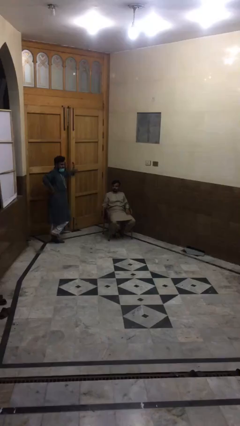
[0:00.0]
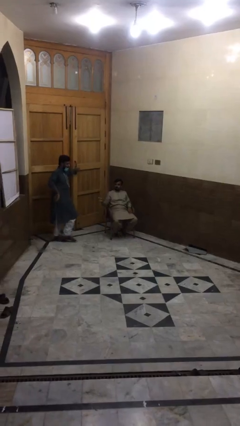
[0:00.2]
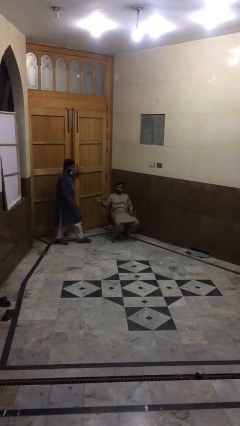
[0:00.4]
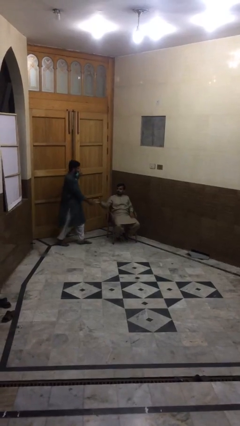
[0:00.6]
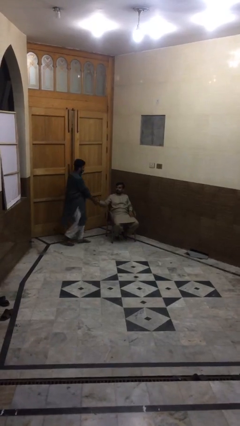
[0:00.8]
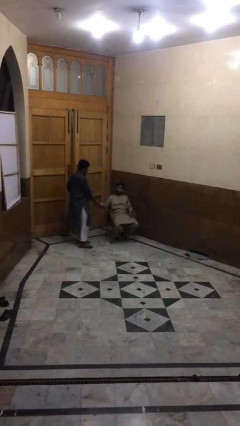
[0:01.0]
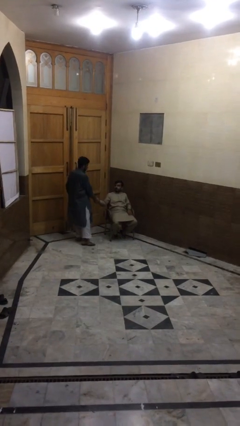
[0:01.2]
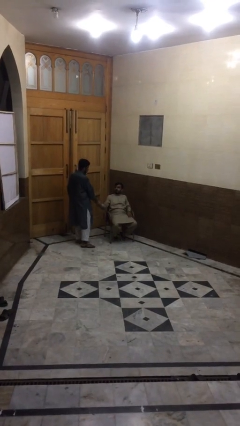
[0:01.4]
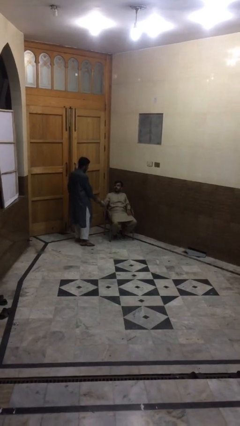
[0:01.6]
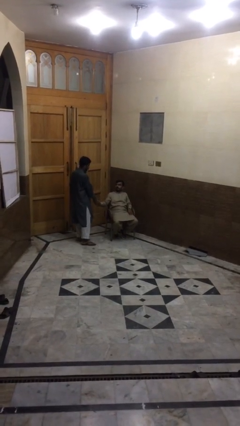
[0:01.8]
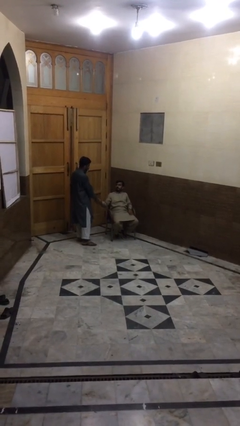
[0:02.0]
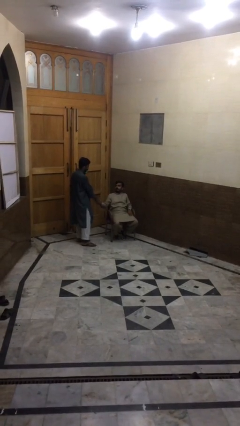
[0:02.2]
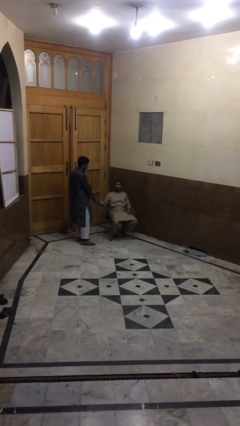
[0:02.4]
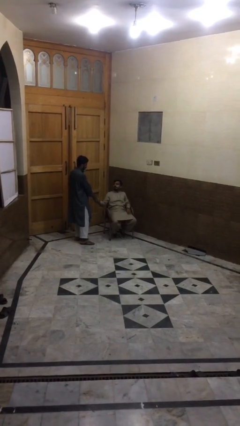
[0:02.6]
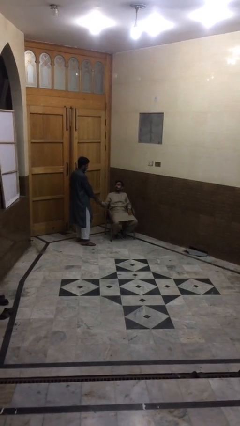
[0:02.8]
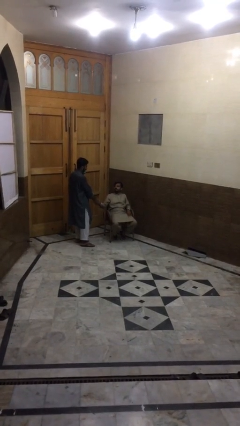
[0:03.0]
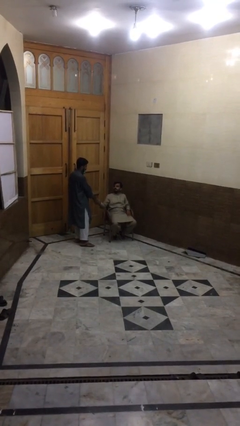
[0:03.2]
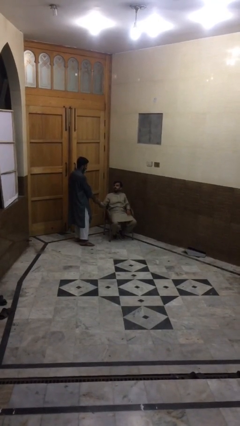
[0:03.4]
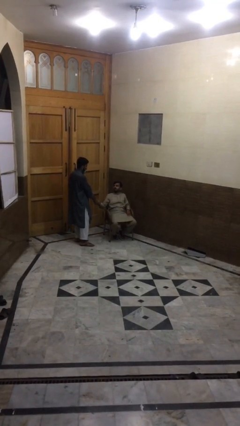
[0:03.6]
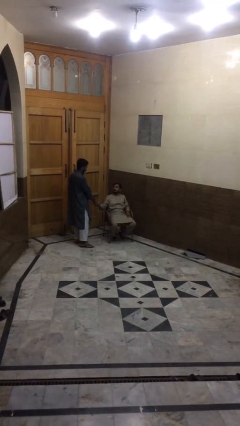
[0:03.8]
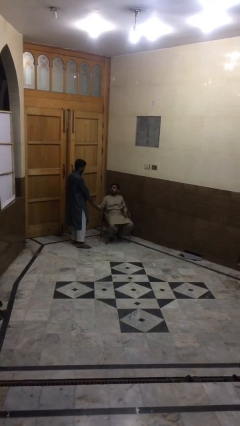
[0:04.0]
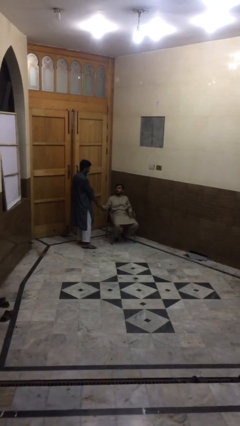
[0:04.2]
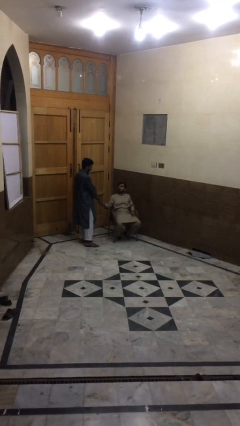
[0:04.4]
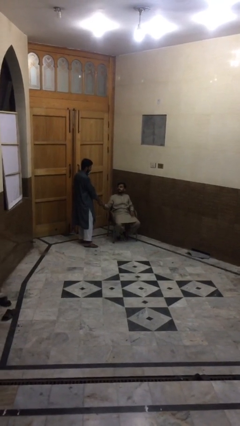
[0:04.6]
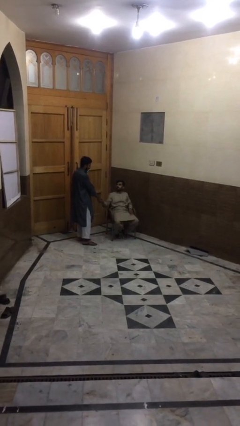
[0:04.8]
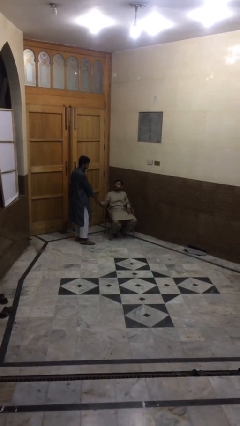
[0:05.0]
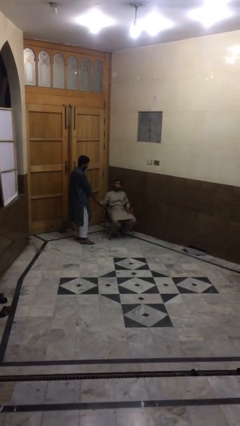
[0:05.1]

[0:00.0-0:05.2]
person shakes hand

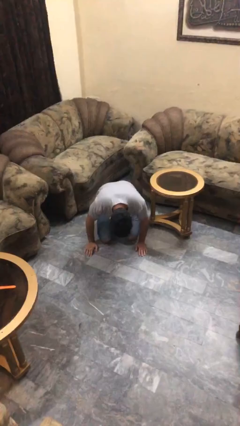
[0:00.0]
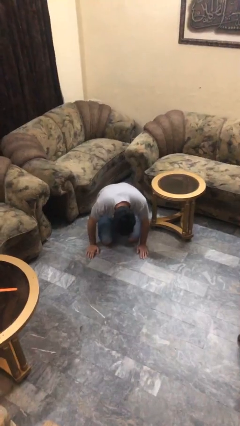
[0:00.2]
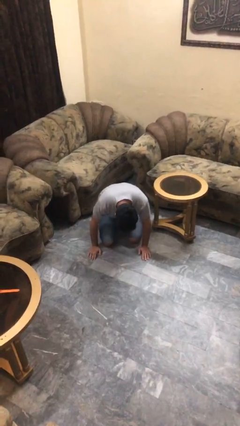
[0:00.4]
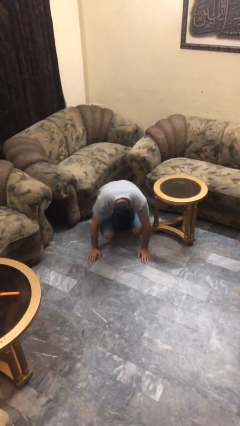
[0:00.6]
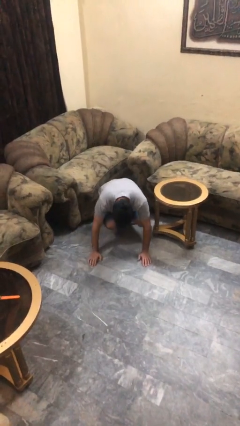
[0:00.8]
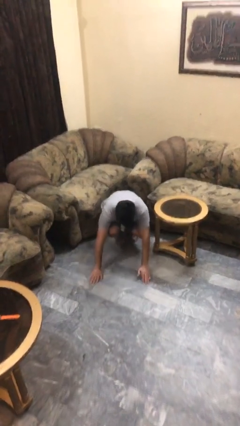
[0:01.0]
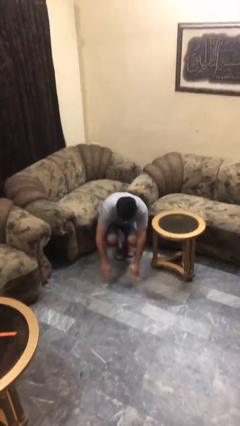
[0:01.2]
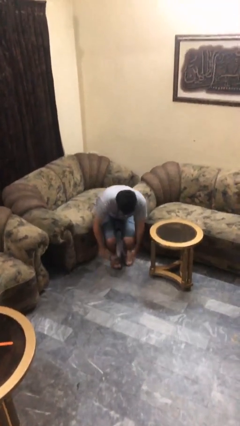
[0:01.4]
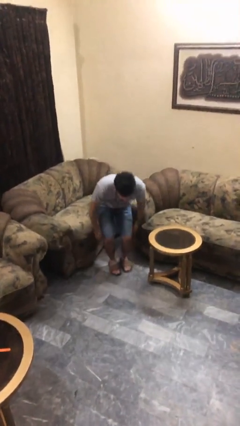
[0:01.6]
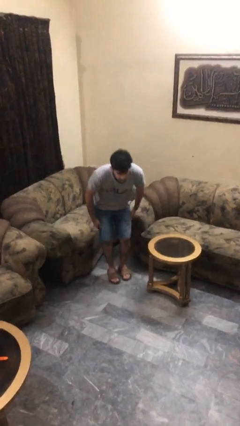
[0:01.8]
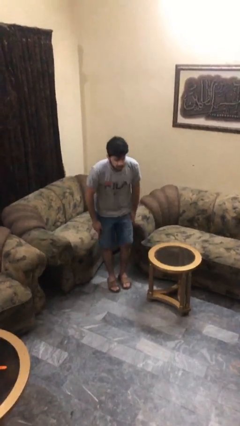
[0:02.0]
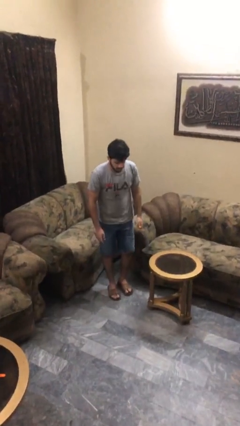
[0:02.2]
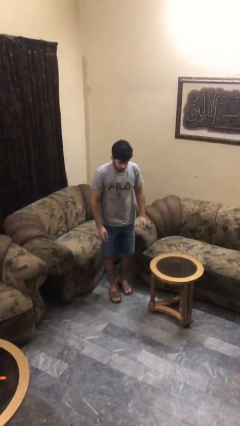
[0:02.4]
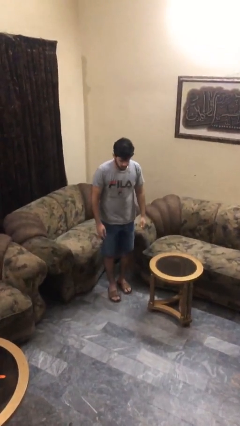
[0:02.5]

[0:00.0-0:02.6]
person stands up from floor

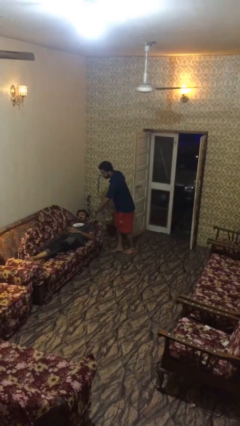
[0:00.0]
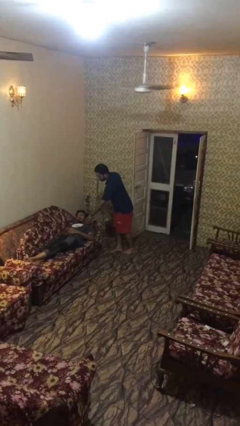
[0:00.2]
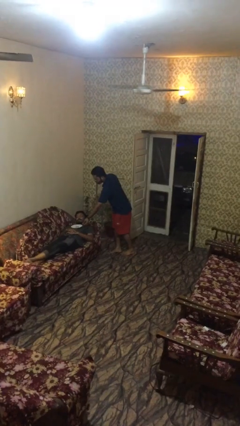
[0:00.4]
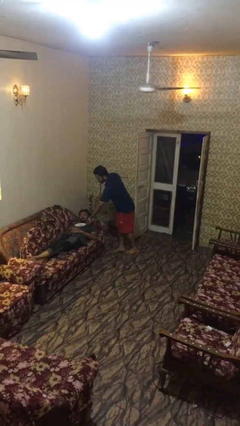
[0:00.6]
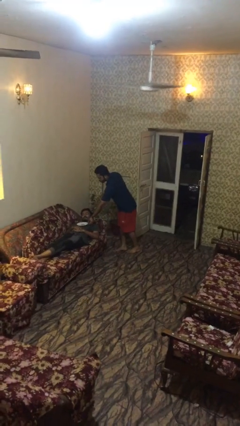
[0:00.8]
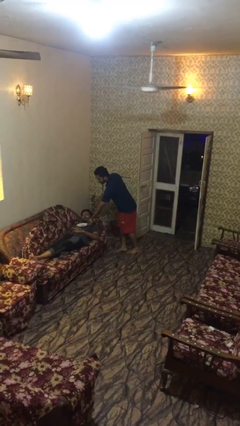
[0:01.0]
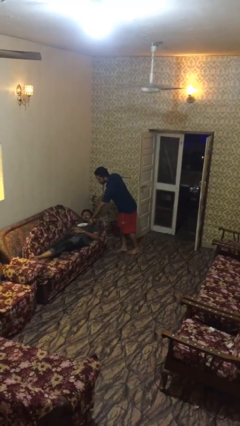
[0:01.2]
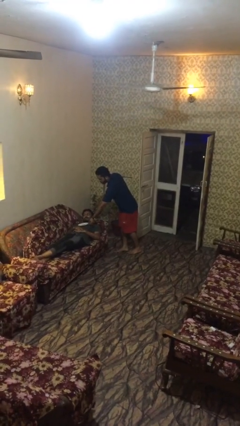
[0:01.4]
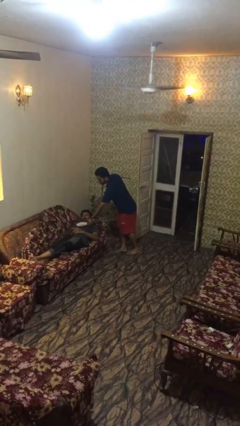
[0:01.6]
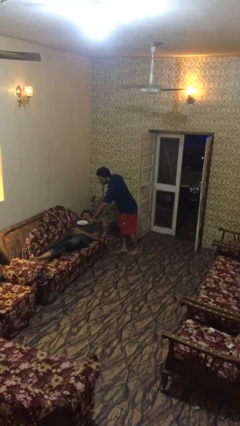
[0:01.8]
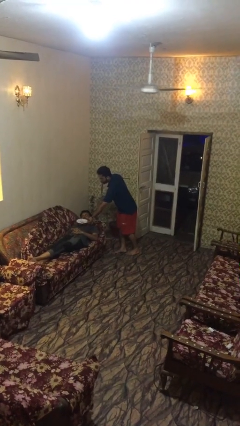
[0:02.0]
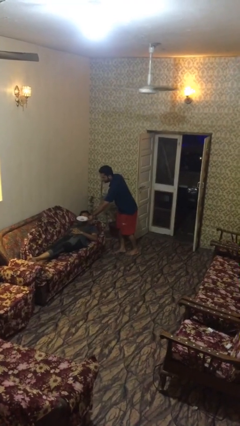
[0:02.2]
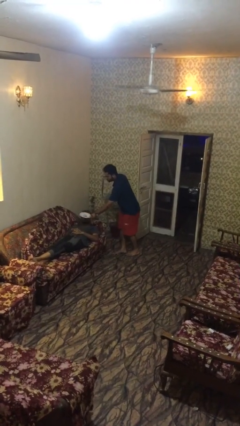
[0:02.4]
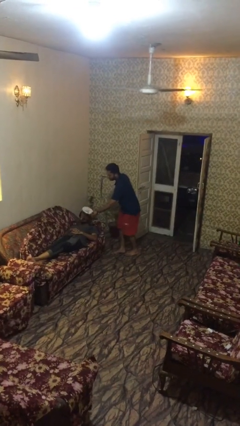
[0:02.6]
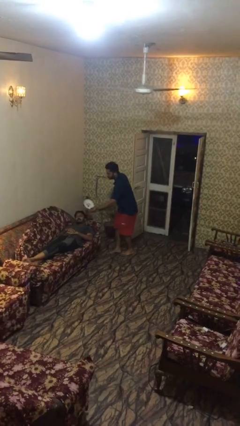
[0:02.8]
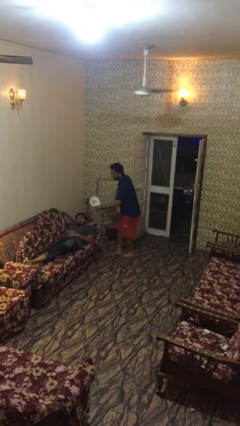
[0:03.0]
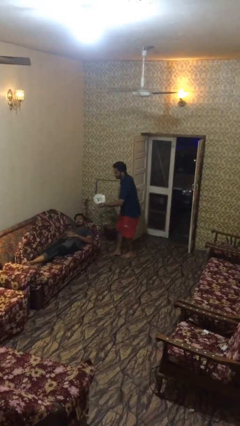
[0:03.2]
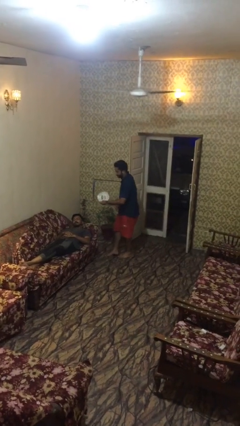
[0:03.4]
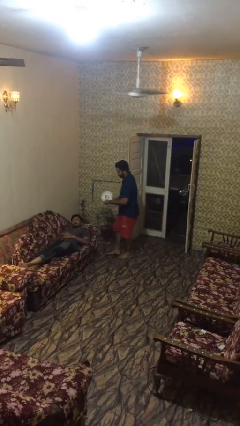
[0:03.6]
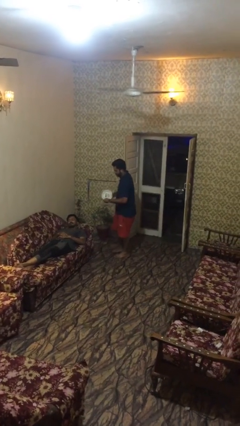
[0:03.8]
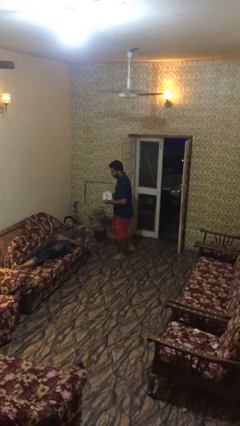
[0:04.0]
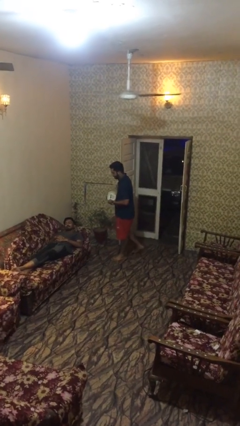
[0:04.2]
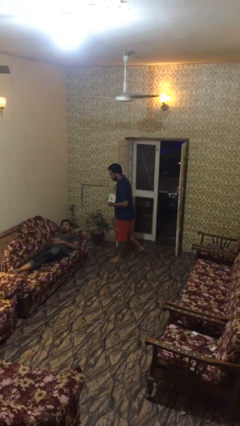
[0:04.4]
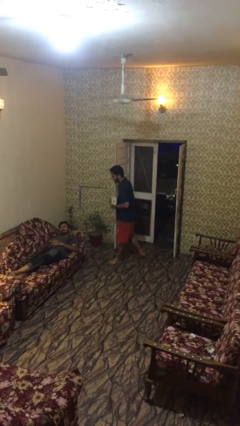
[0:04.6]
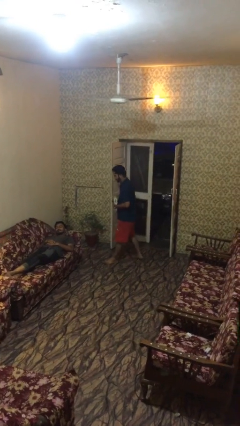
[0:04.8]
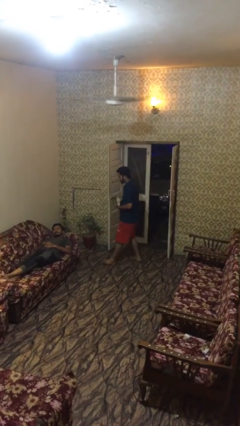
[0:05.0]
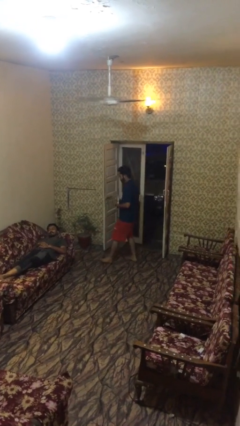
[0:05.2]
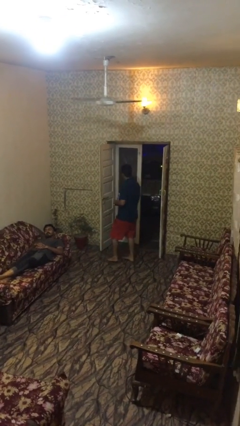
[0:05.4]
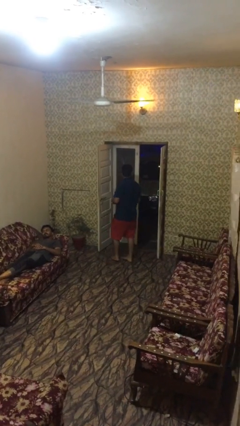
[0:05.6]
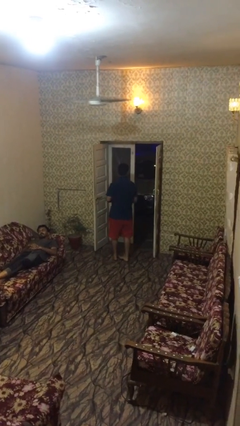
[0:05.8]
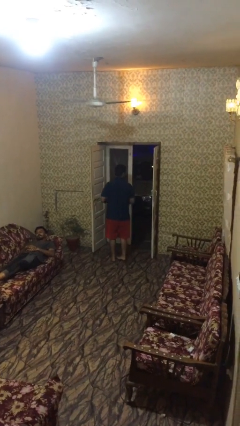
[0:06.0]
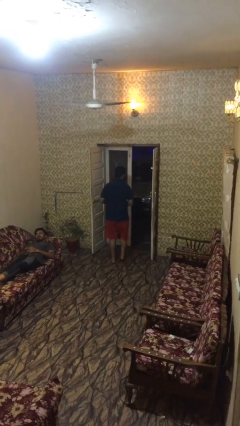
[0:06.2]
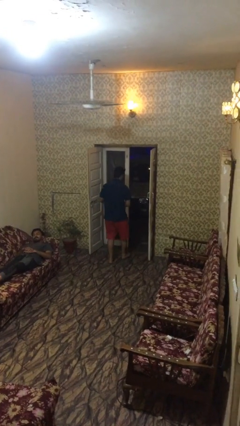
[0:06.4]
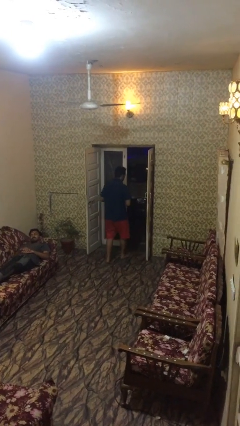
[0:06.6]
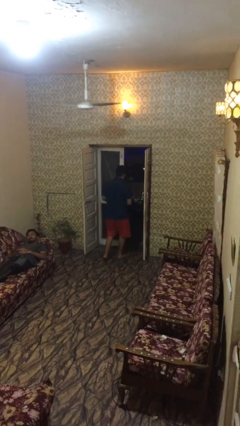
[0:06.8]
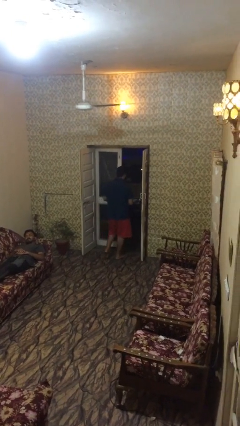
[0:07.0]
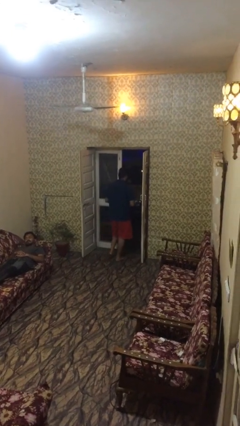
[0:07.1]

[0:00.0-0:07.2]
person steals object from person

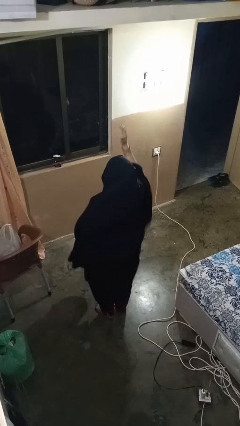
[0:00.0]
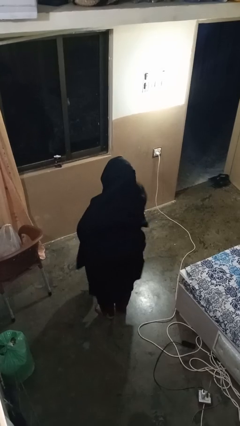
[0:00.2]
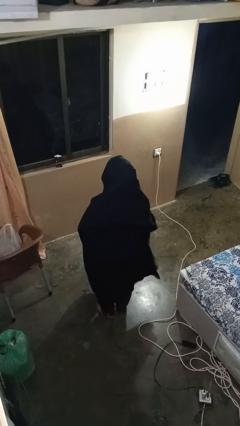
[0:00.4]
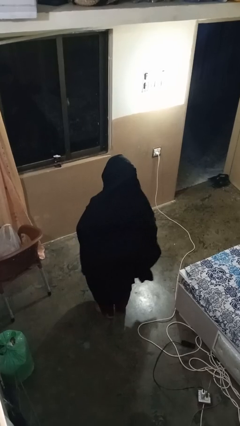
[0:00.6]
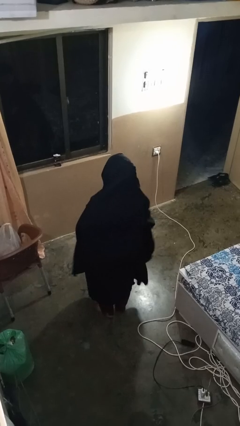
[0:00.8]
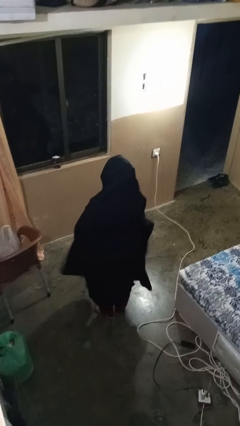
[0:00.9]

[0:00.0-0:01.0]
person gestures lower hand

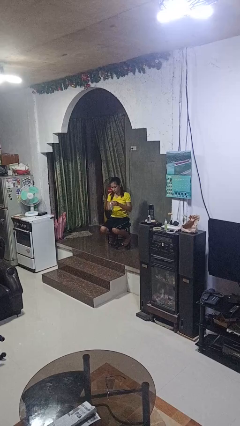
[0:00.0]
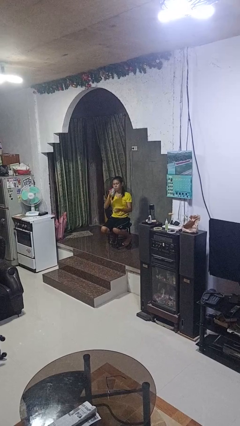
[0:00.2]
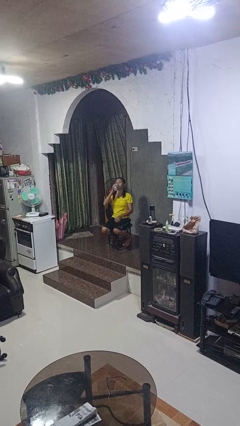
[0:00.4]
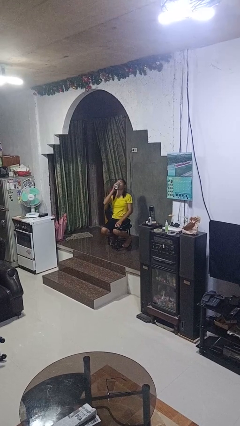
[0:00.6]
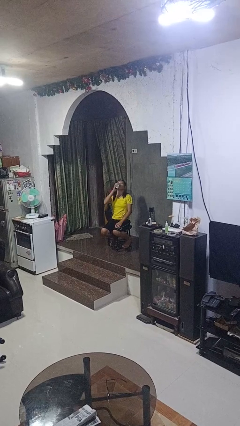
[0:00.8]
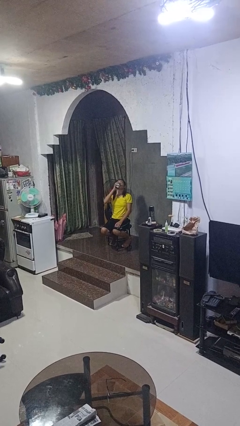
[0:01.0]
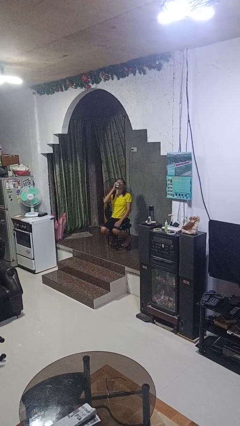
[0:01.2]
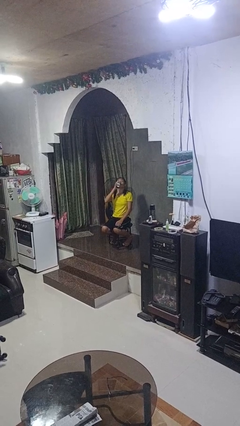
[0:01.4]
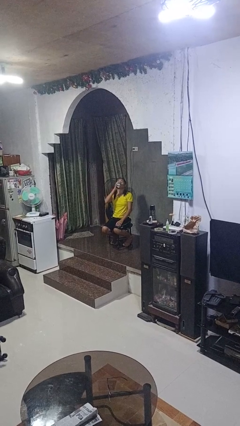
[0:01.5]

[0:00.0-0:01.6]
person drinks from beverage can
